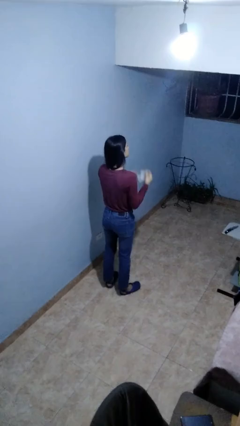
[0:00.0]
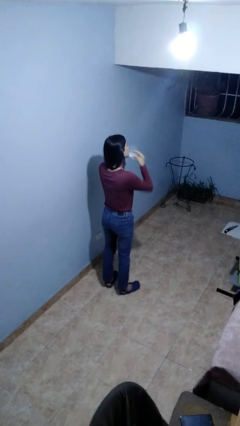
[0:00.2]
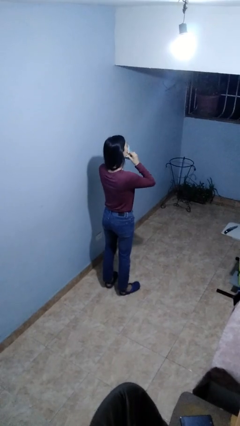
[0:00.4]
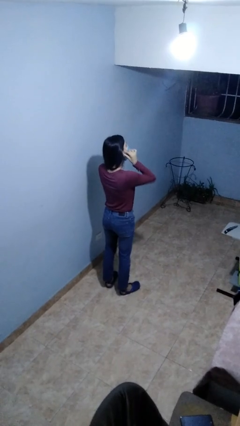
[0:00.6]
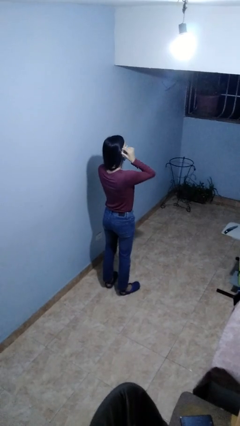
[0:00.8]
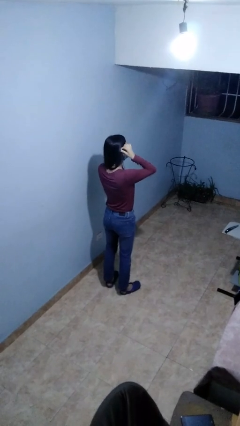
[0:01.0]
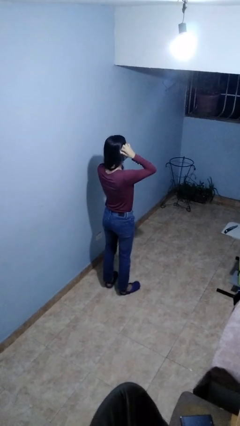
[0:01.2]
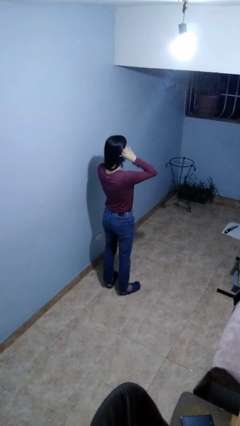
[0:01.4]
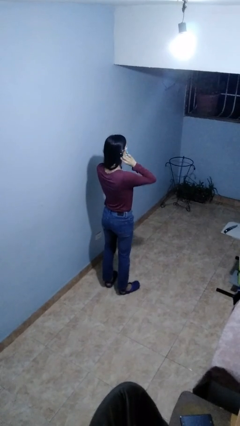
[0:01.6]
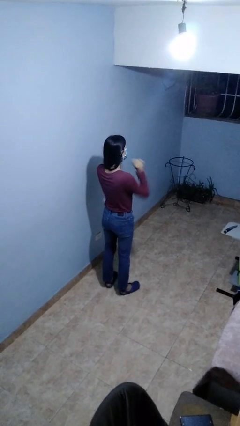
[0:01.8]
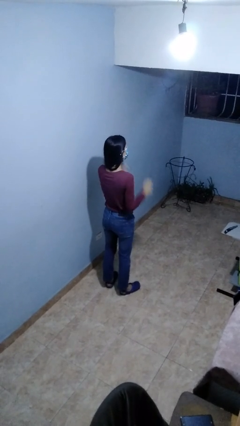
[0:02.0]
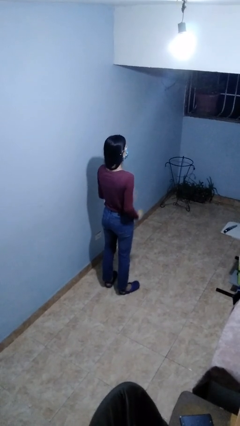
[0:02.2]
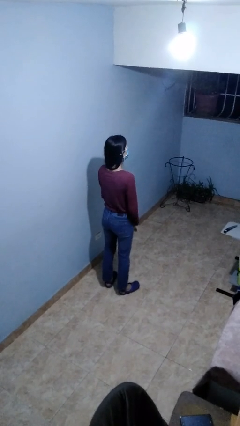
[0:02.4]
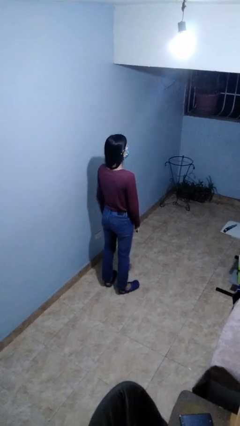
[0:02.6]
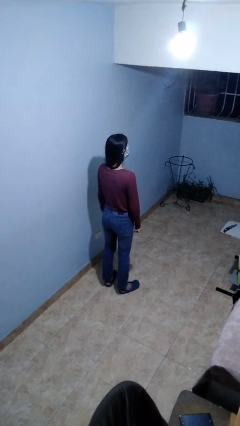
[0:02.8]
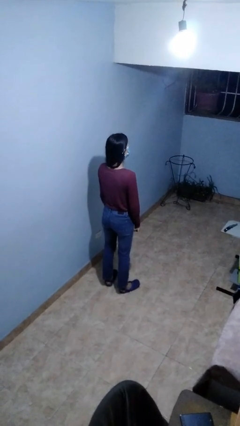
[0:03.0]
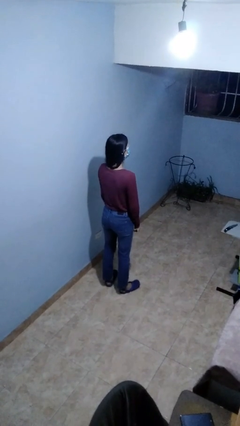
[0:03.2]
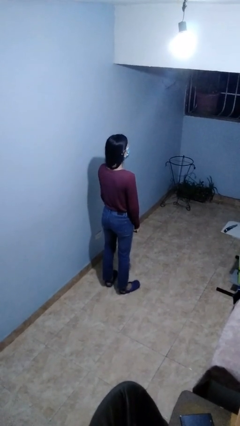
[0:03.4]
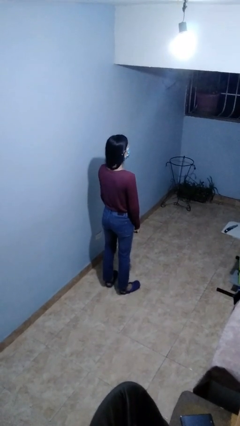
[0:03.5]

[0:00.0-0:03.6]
person puts on facemask

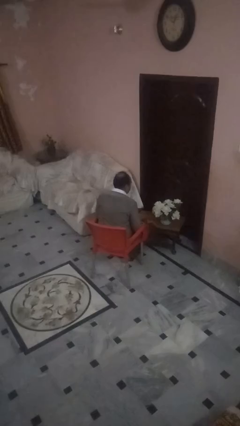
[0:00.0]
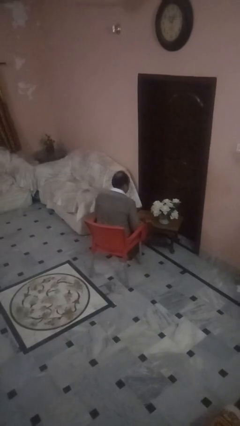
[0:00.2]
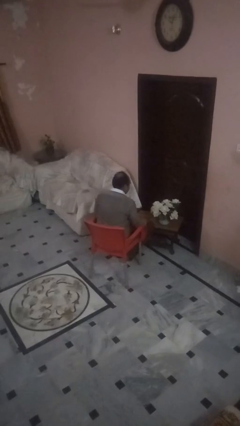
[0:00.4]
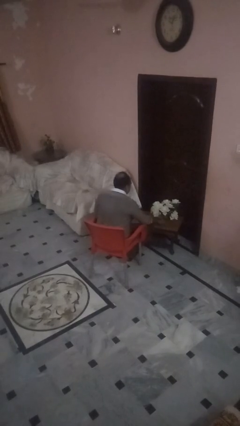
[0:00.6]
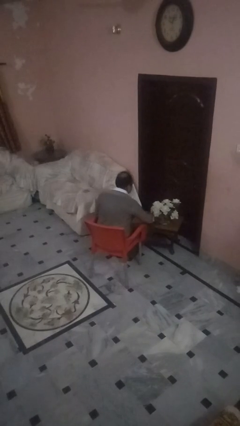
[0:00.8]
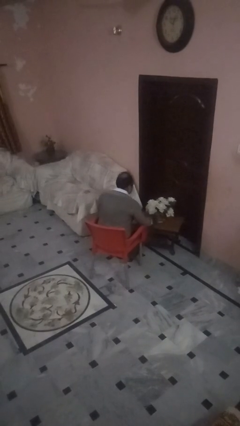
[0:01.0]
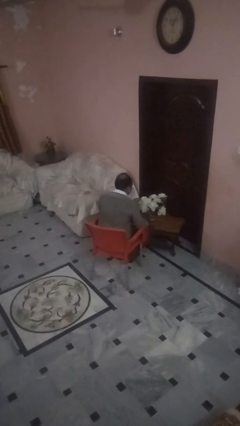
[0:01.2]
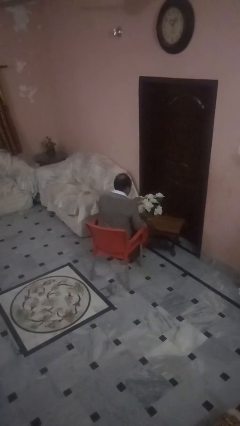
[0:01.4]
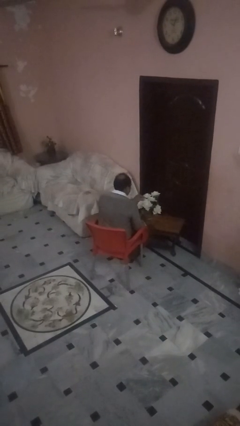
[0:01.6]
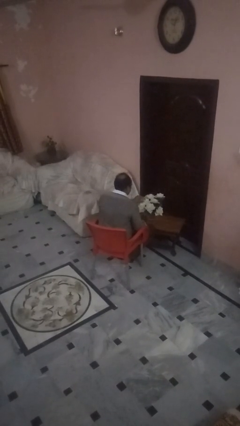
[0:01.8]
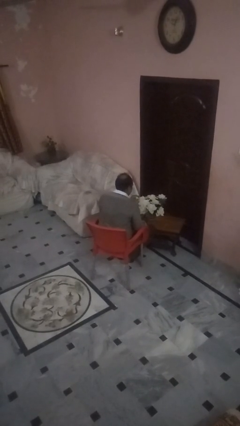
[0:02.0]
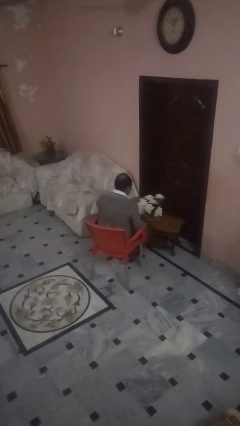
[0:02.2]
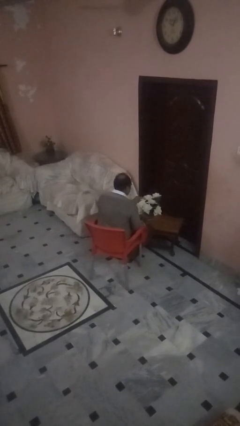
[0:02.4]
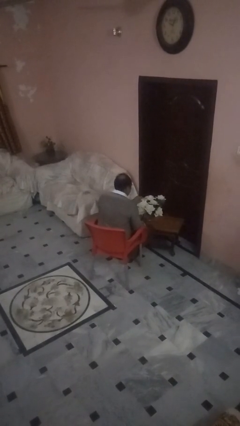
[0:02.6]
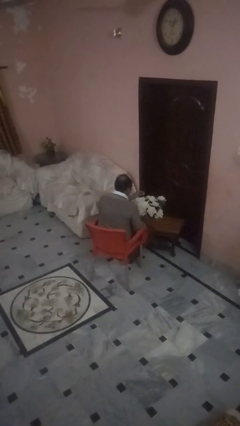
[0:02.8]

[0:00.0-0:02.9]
person arranges flowers in vase

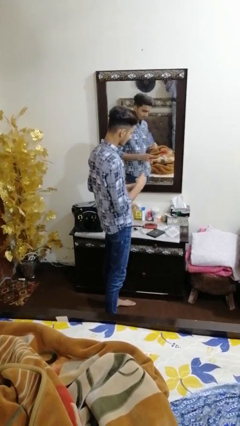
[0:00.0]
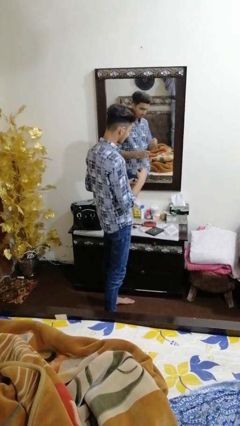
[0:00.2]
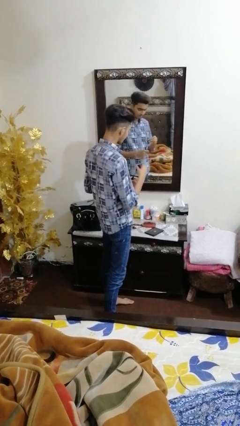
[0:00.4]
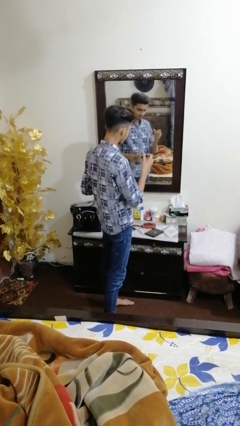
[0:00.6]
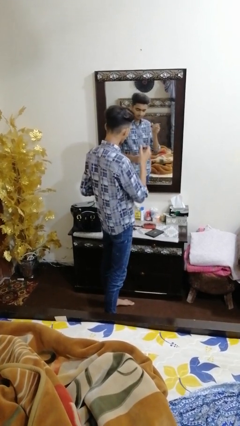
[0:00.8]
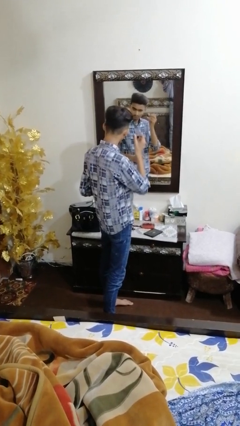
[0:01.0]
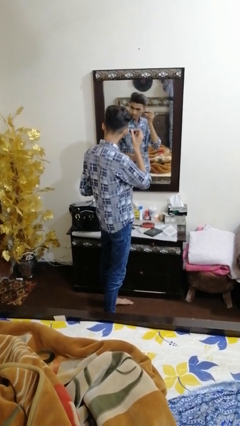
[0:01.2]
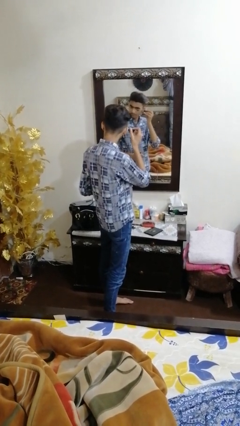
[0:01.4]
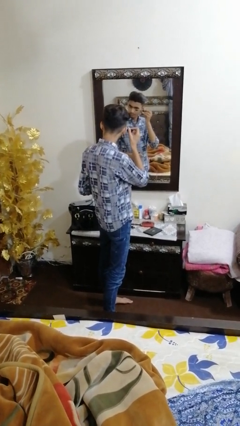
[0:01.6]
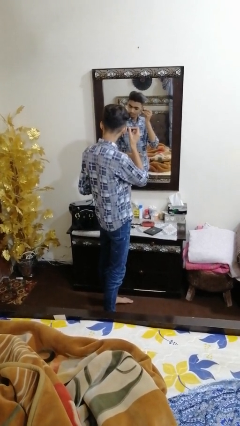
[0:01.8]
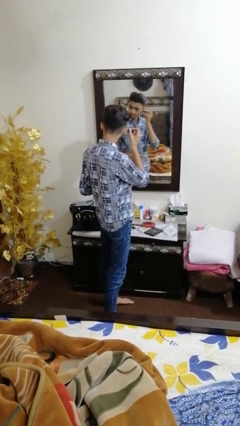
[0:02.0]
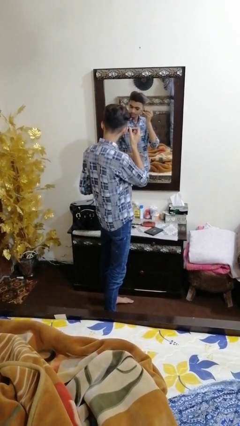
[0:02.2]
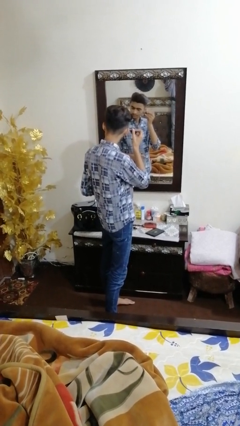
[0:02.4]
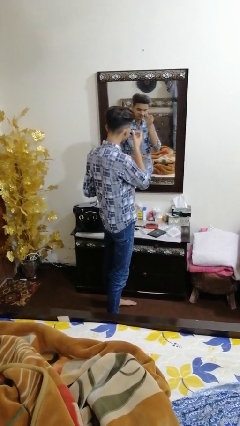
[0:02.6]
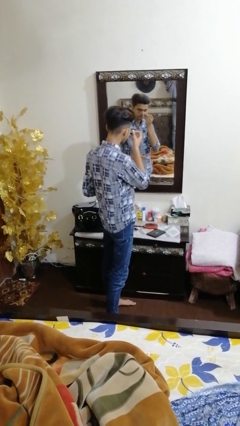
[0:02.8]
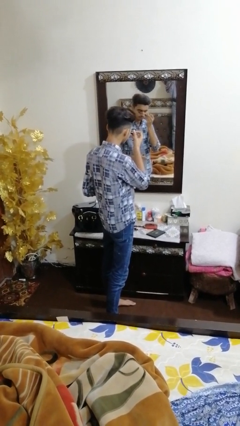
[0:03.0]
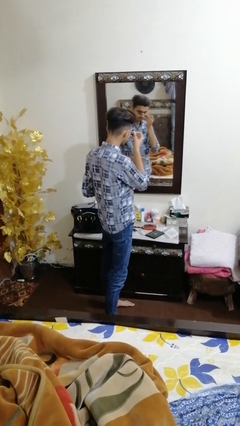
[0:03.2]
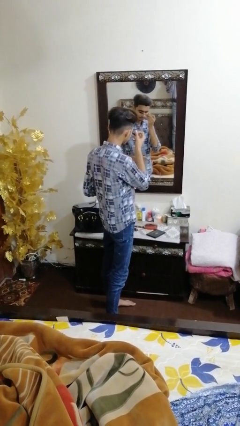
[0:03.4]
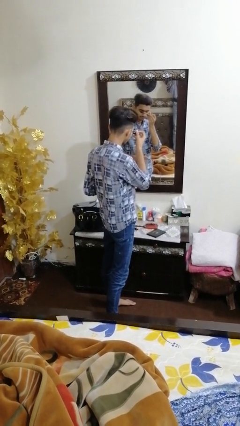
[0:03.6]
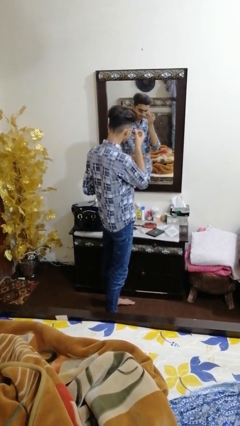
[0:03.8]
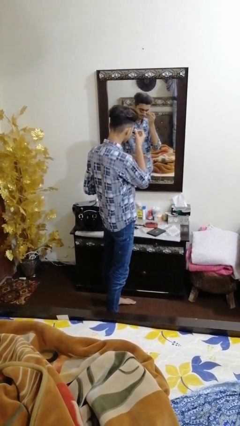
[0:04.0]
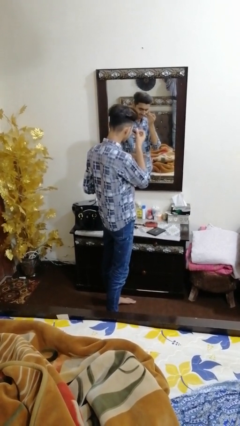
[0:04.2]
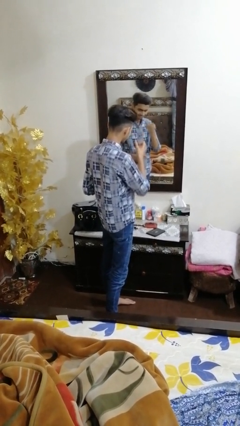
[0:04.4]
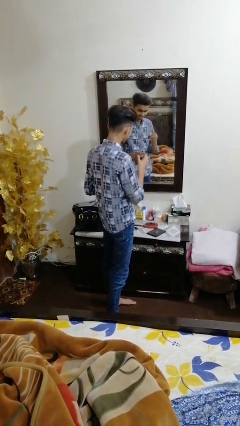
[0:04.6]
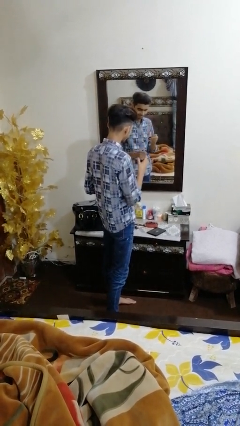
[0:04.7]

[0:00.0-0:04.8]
person applies eye makeup

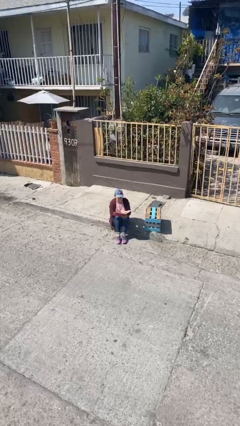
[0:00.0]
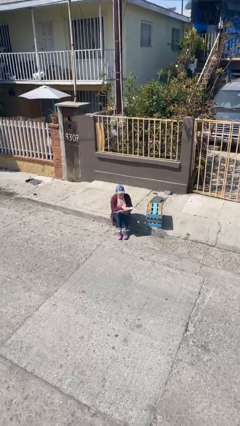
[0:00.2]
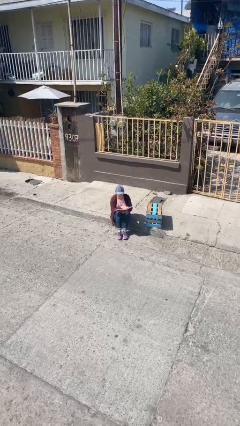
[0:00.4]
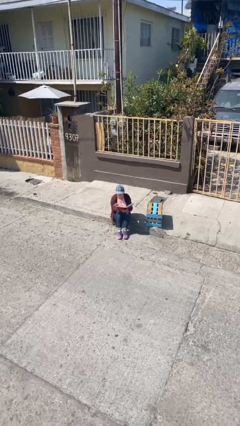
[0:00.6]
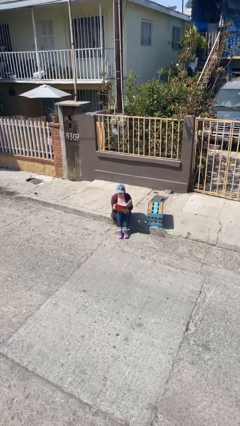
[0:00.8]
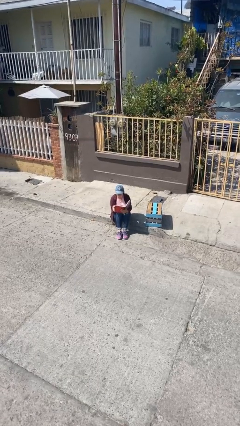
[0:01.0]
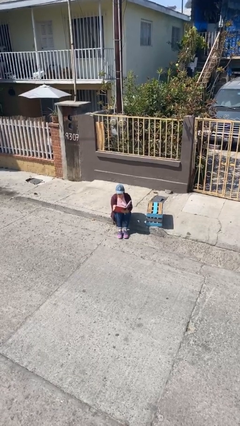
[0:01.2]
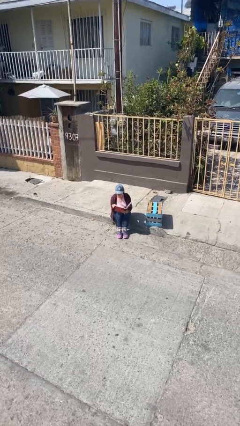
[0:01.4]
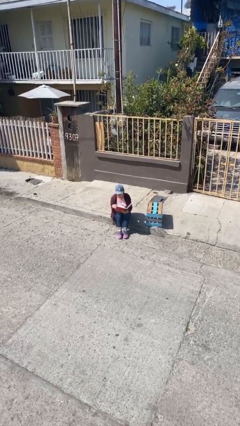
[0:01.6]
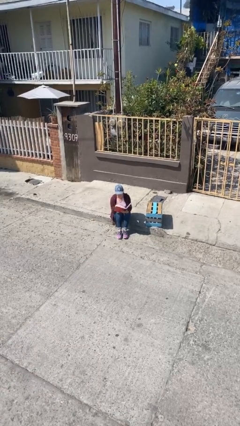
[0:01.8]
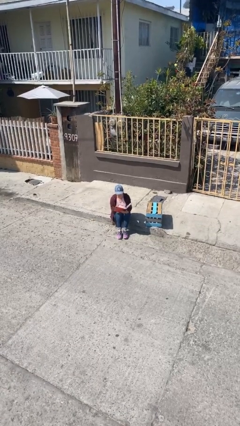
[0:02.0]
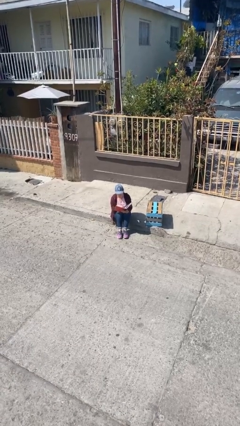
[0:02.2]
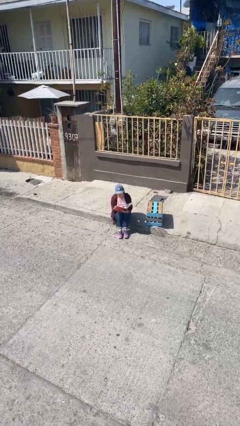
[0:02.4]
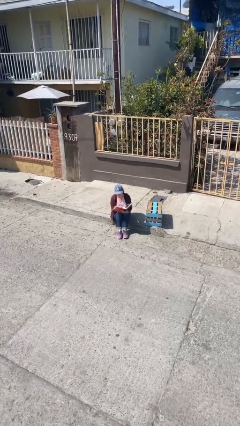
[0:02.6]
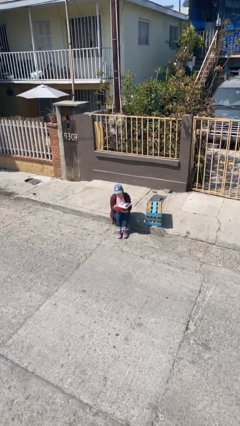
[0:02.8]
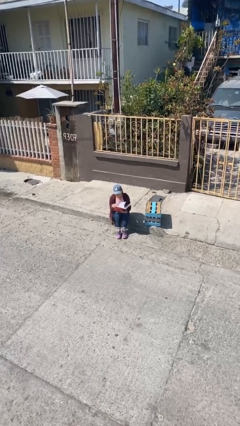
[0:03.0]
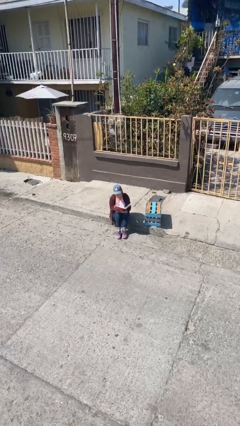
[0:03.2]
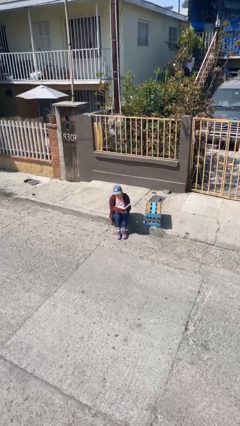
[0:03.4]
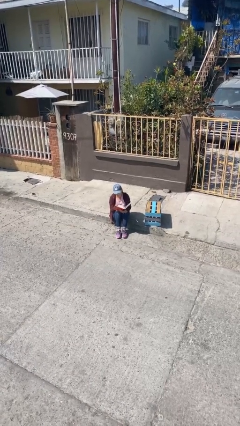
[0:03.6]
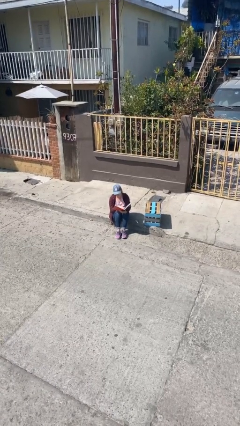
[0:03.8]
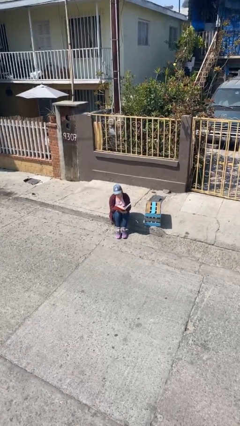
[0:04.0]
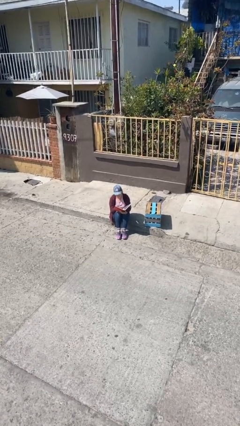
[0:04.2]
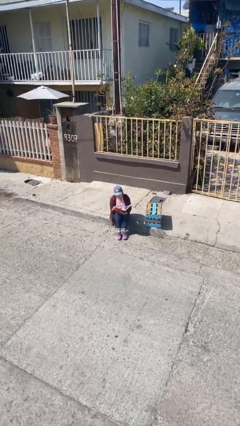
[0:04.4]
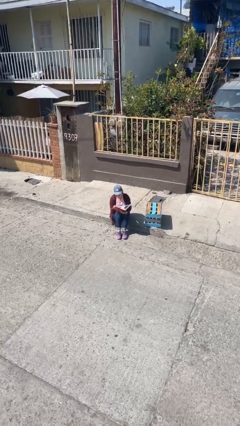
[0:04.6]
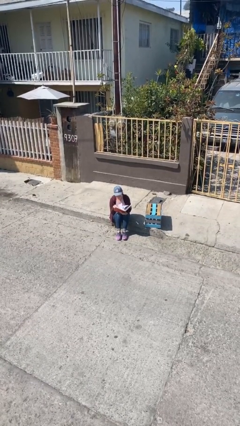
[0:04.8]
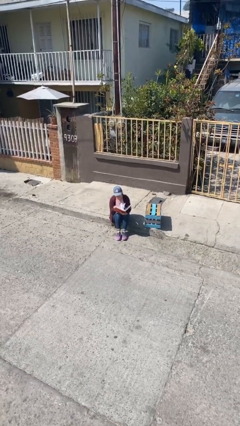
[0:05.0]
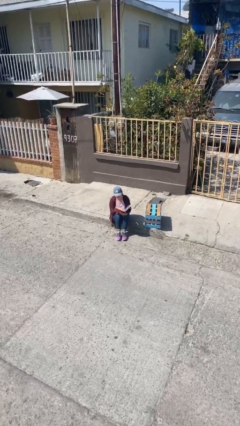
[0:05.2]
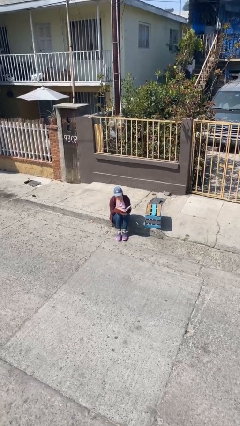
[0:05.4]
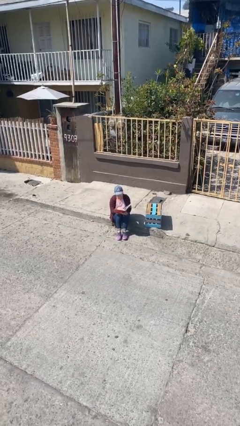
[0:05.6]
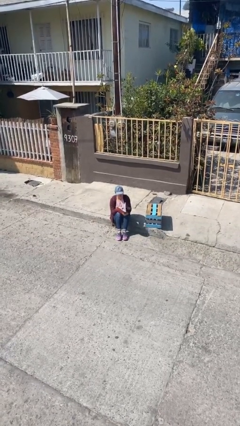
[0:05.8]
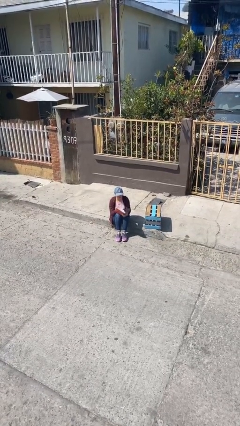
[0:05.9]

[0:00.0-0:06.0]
person reads document

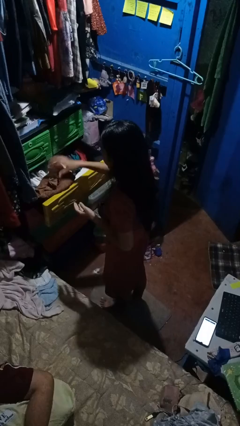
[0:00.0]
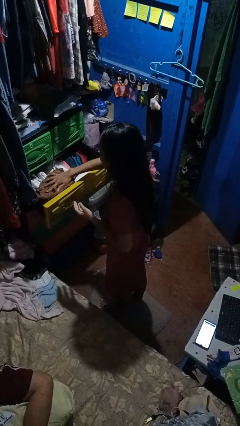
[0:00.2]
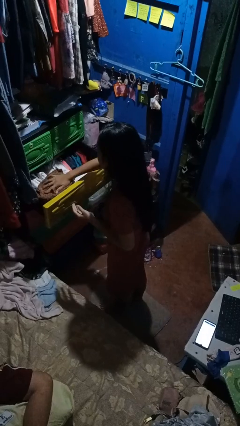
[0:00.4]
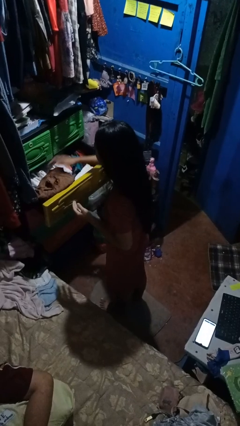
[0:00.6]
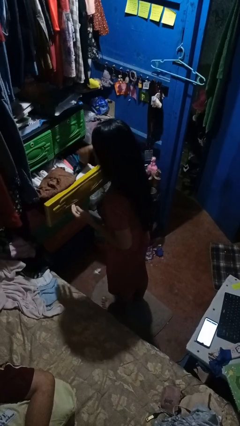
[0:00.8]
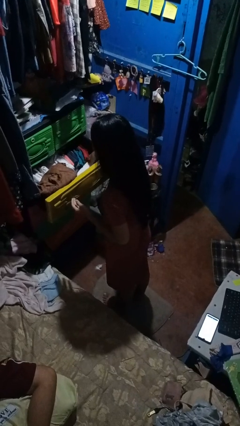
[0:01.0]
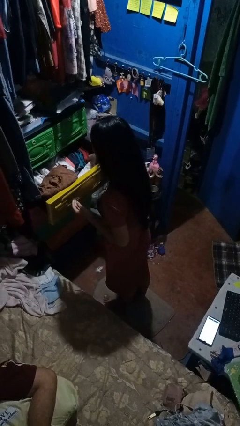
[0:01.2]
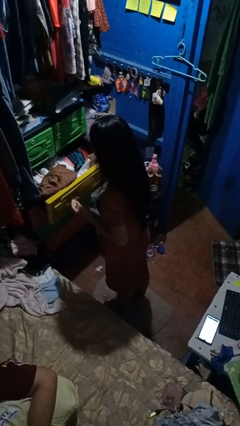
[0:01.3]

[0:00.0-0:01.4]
person puts clothes into dresser
